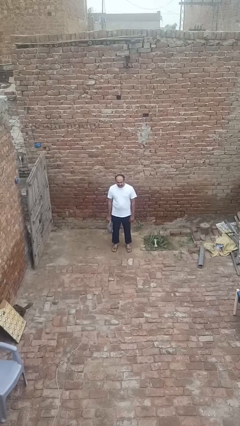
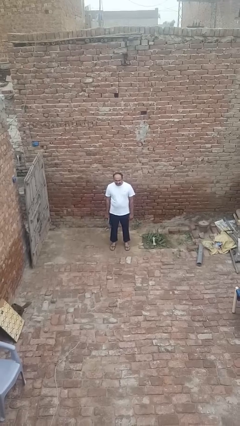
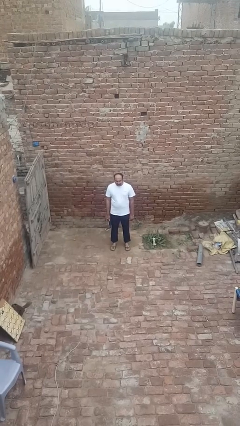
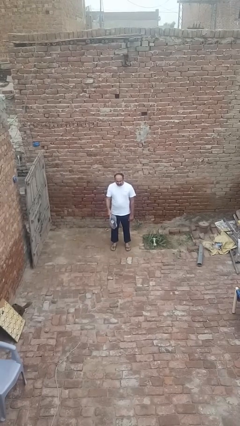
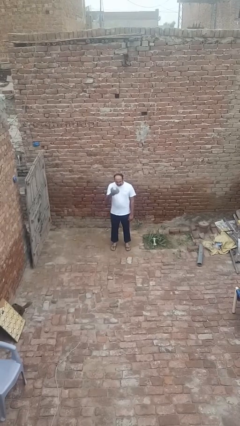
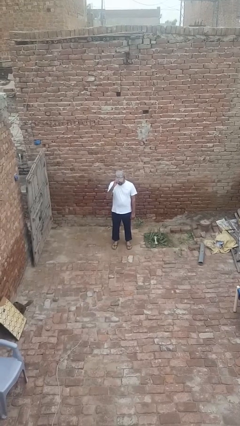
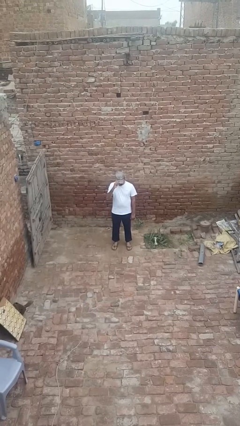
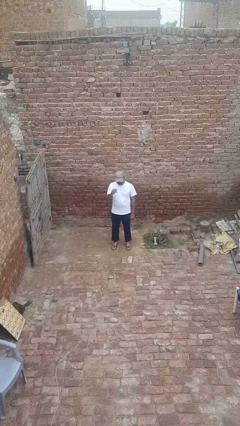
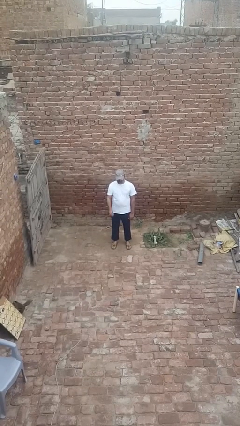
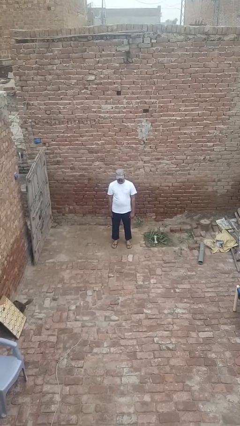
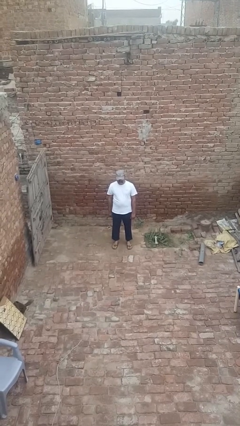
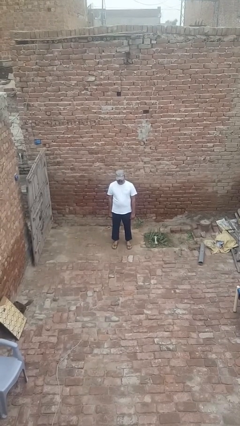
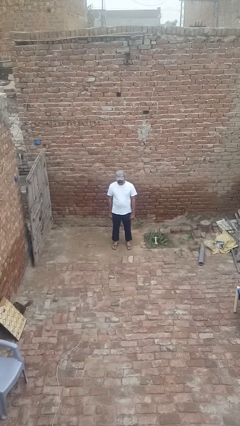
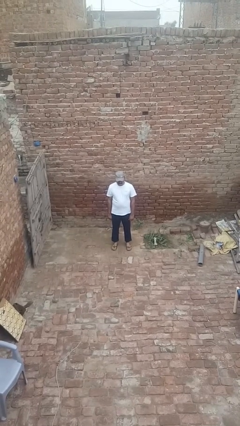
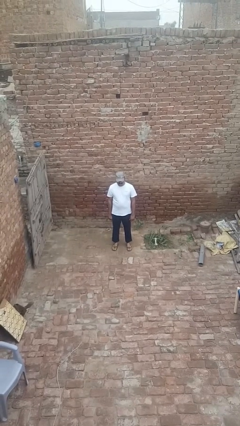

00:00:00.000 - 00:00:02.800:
person puts on hat

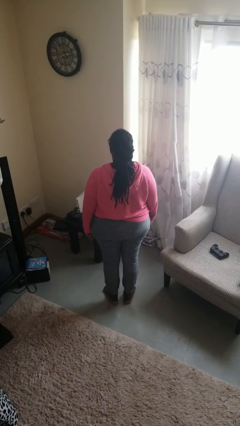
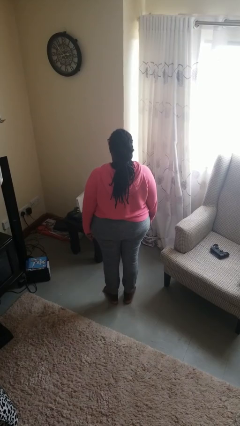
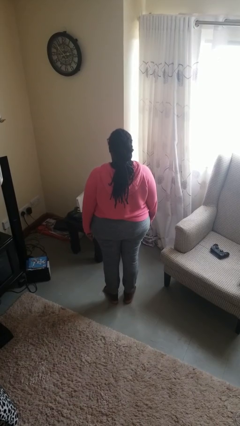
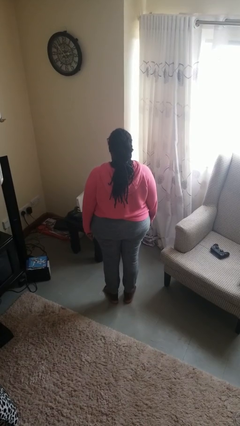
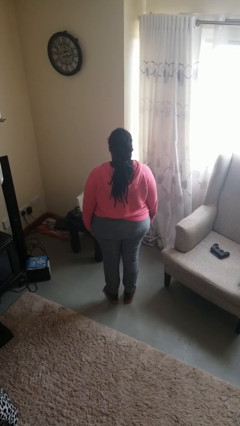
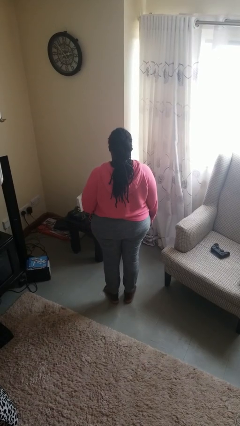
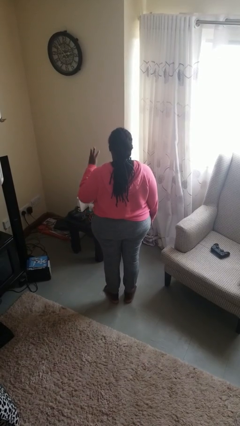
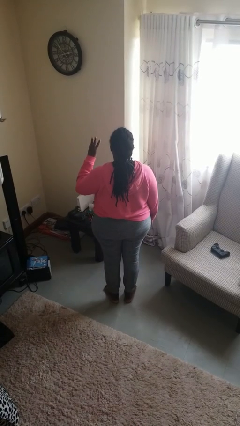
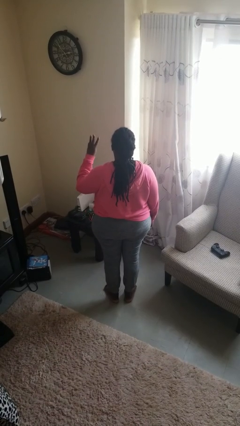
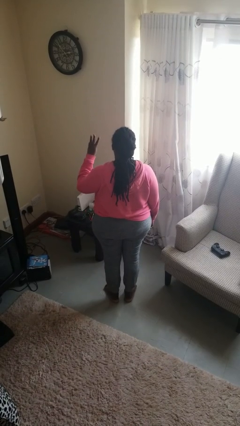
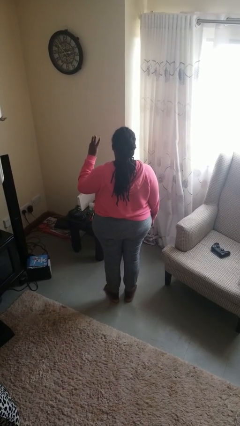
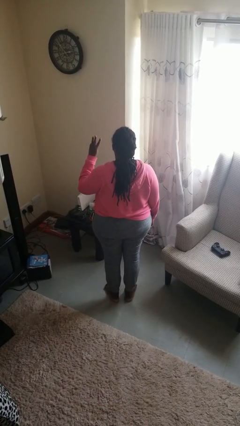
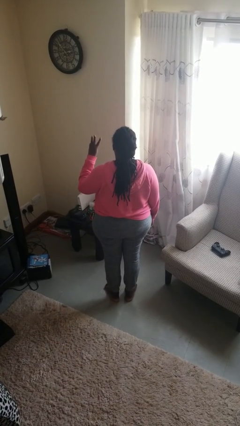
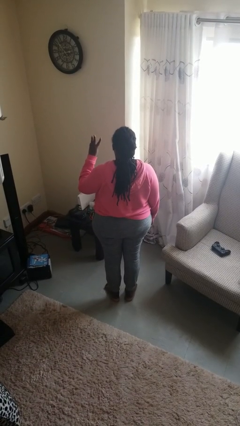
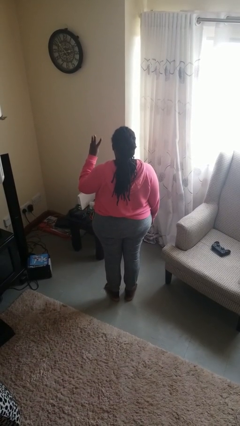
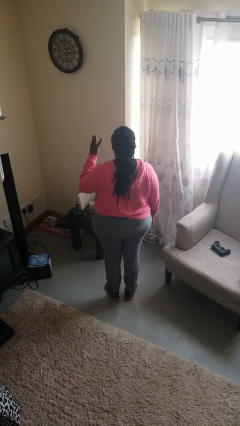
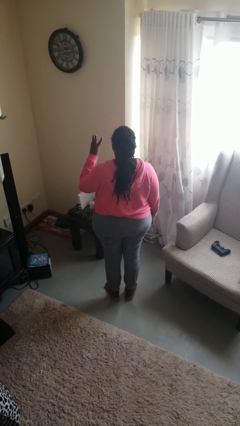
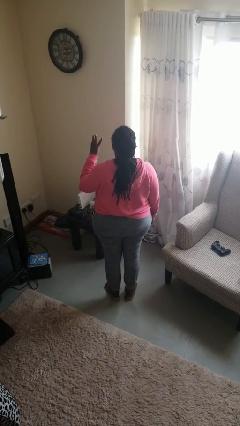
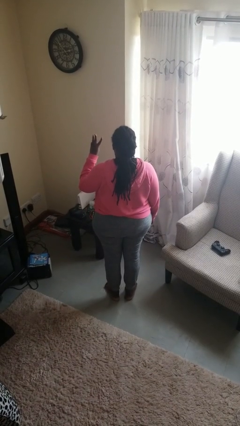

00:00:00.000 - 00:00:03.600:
person gestures number three

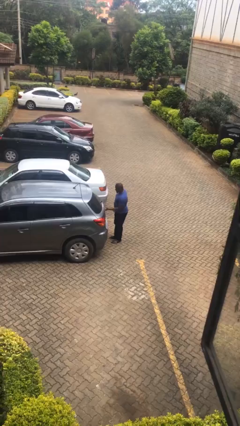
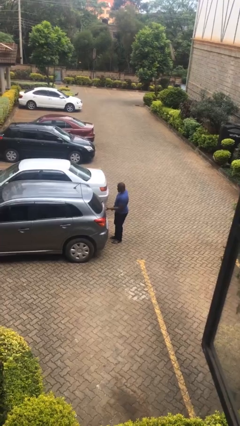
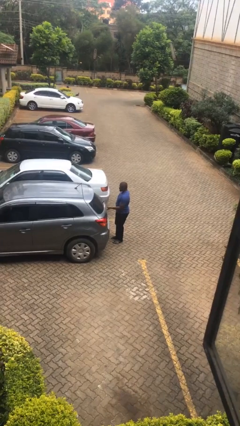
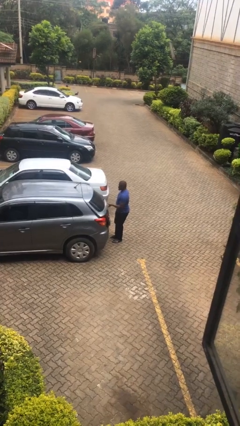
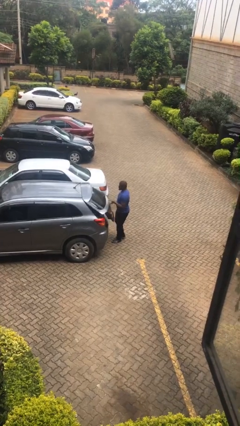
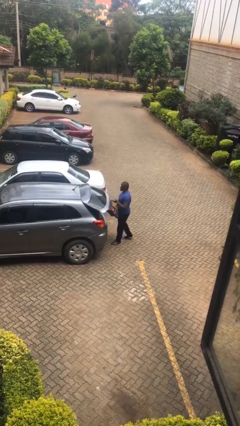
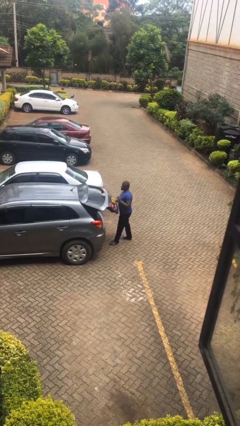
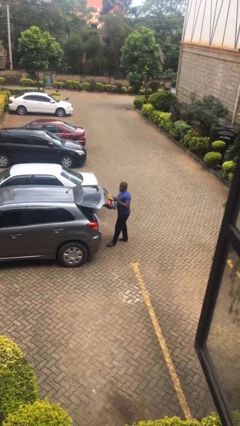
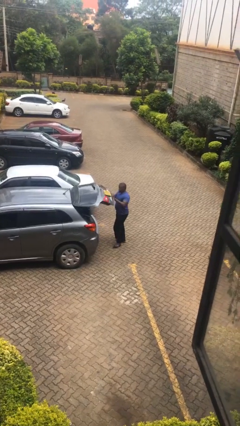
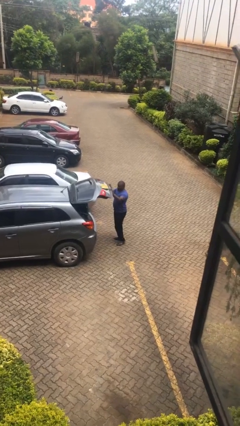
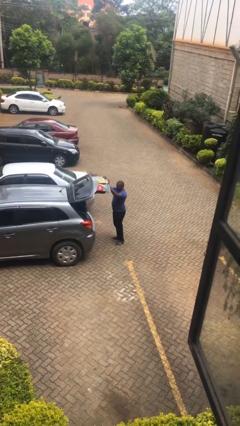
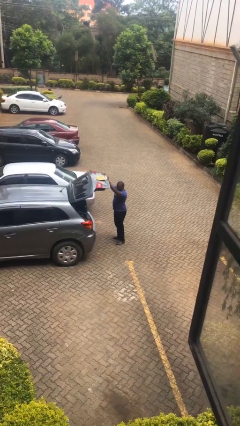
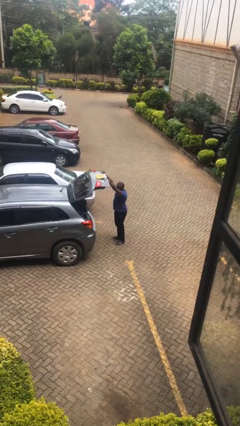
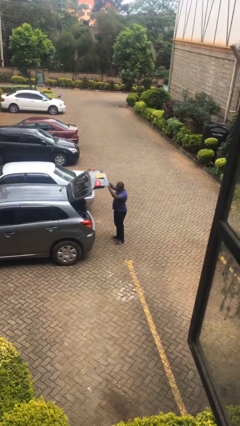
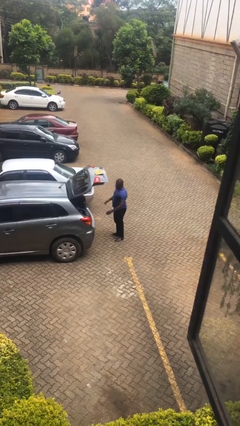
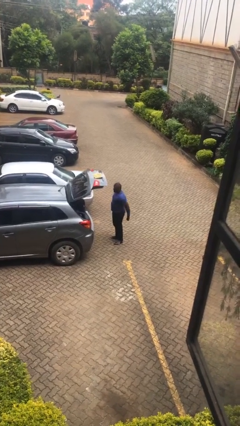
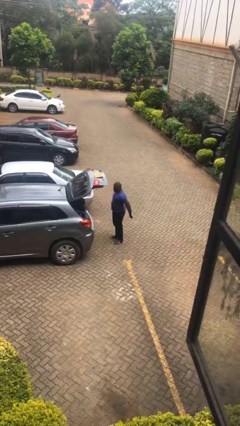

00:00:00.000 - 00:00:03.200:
person opens car trunk

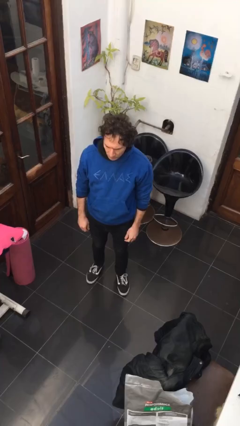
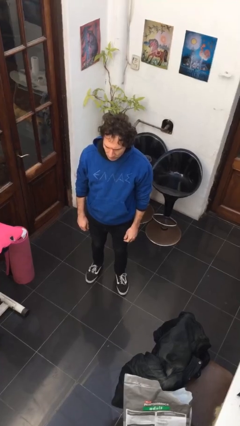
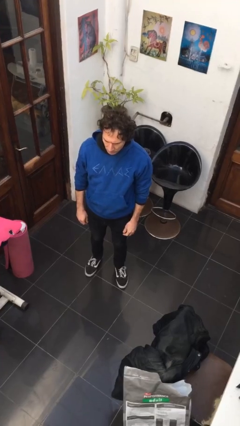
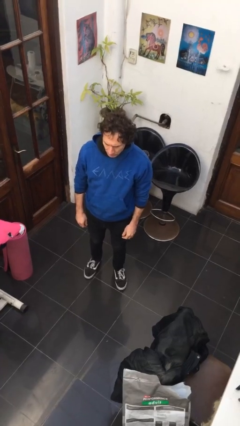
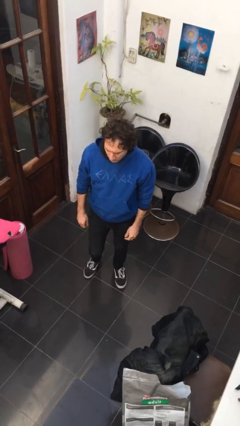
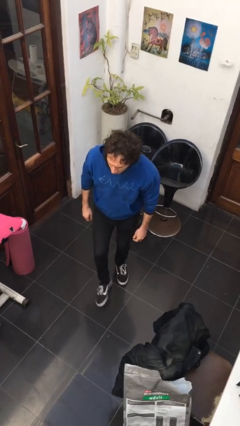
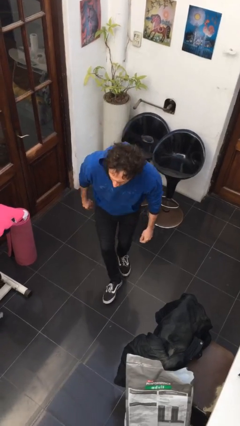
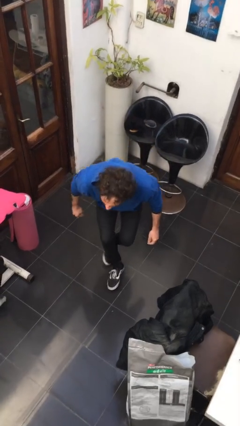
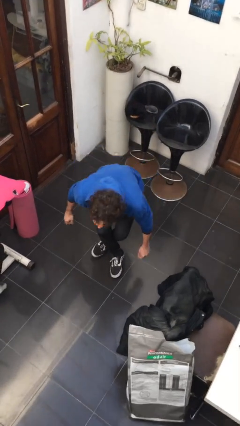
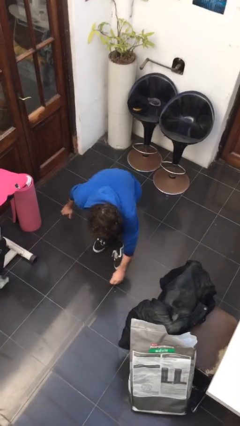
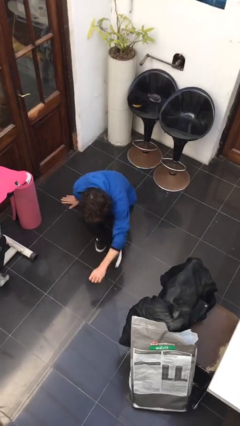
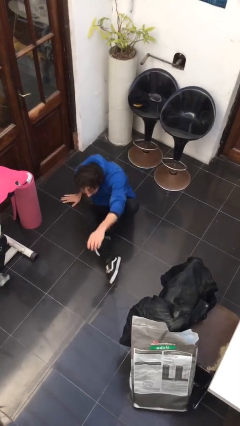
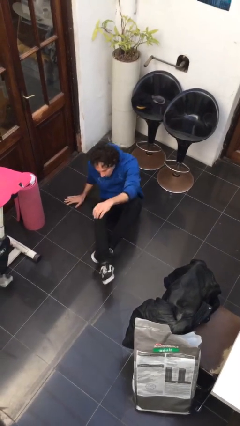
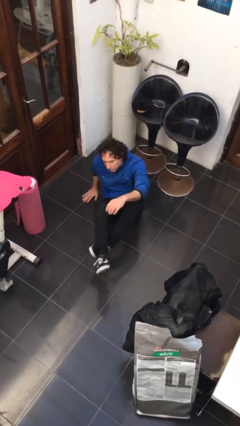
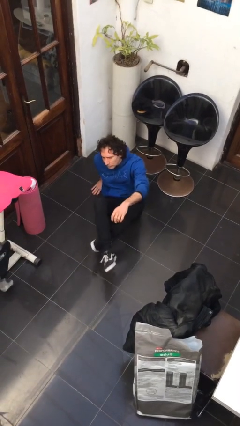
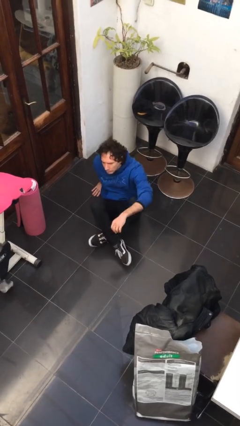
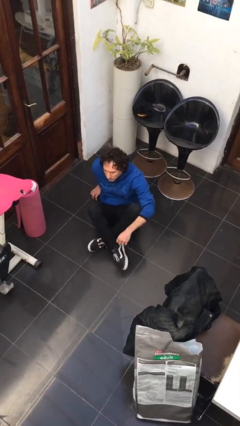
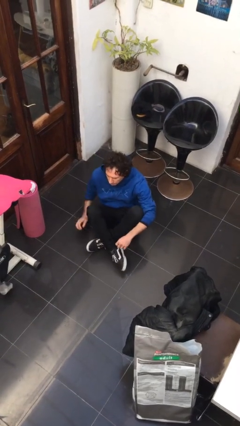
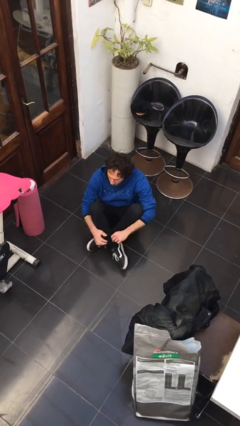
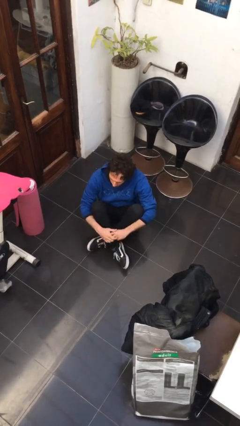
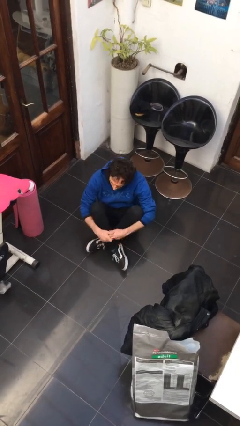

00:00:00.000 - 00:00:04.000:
person sits crisscross

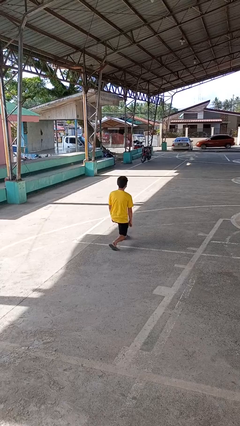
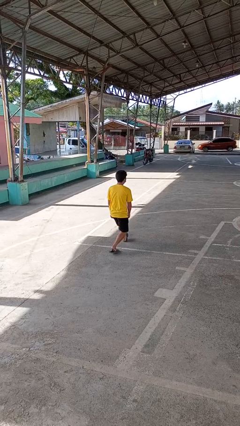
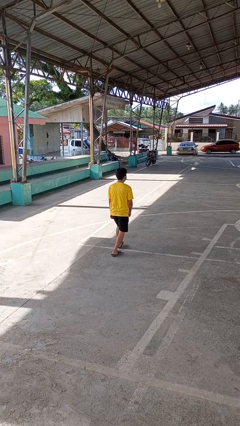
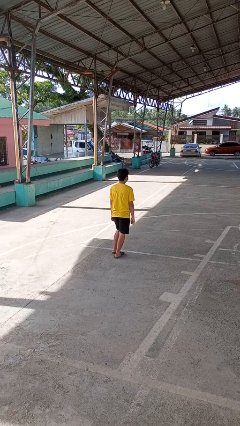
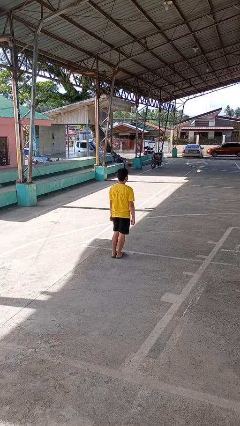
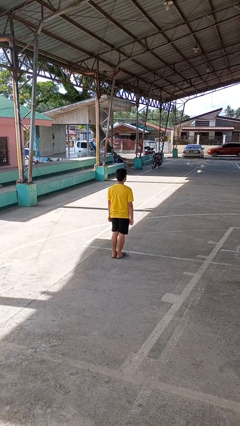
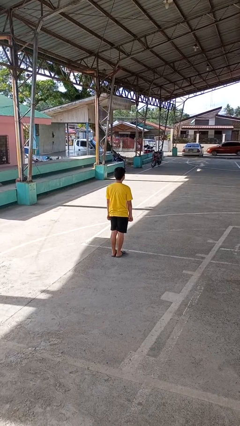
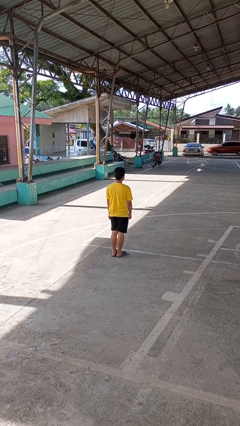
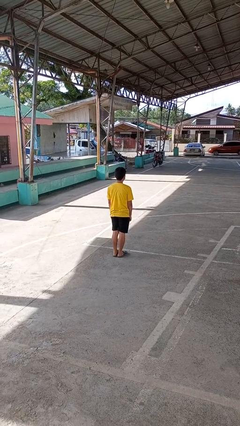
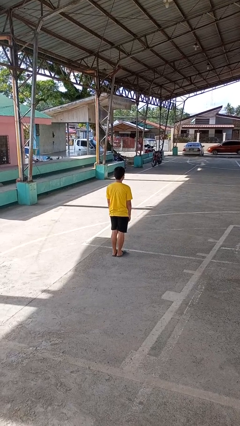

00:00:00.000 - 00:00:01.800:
person stands up from floor

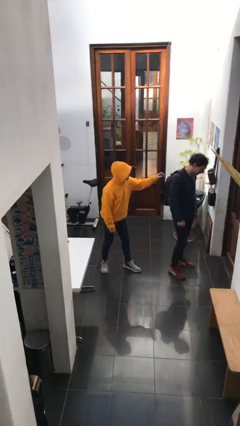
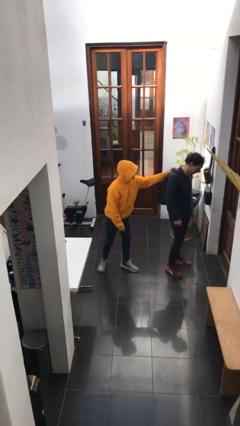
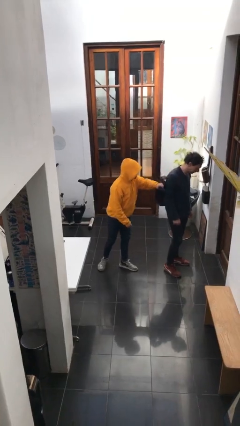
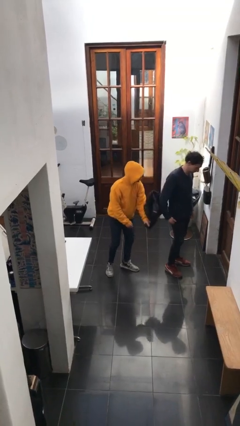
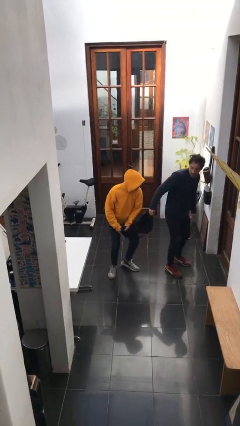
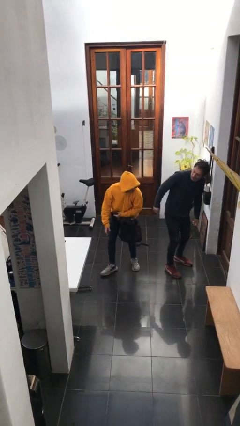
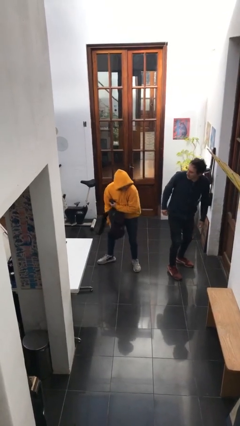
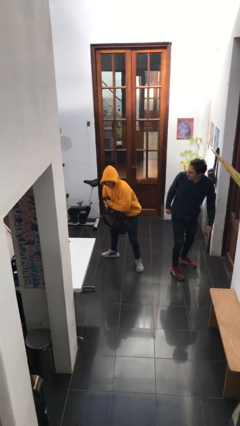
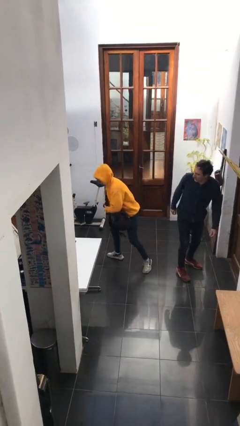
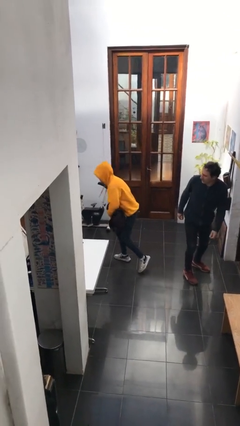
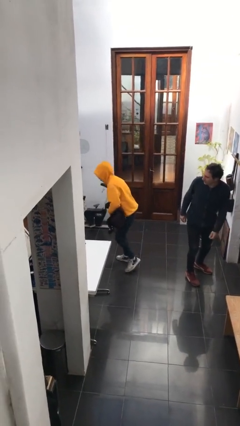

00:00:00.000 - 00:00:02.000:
person steals object from person

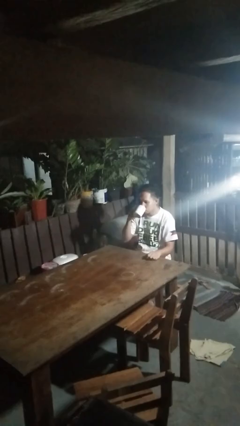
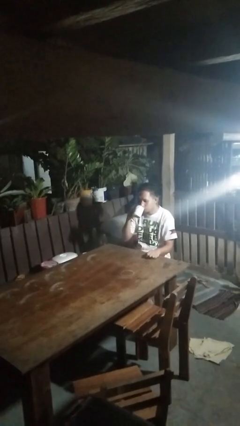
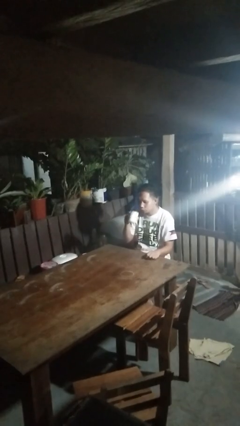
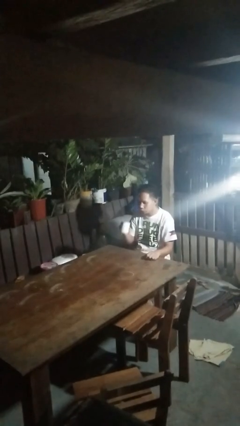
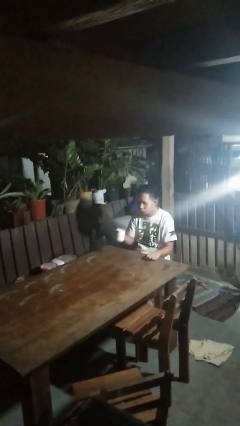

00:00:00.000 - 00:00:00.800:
person puts down object on table
